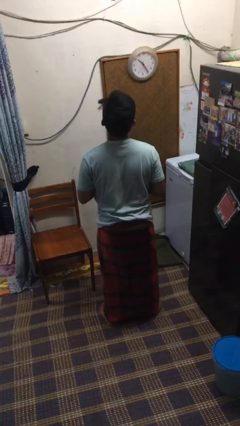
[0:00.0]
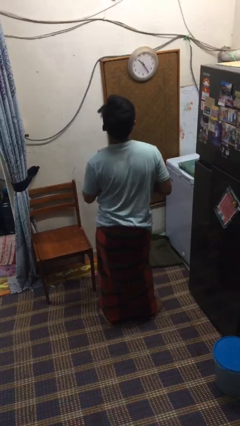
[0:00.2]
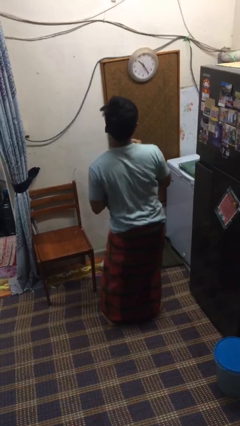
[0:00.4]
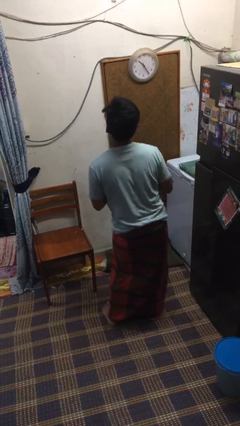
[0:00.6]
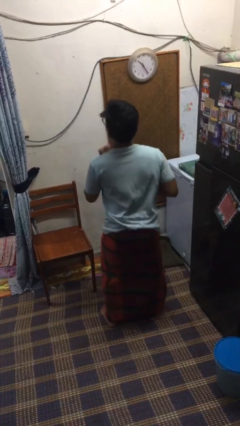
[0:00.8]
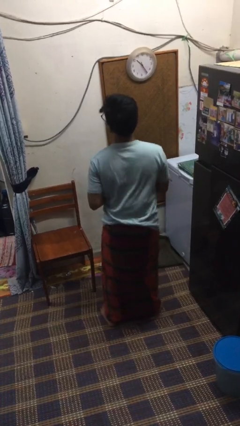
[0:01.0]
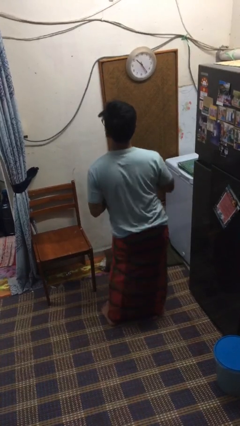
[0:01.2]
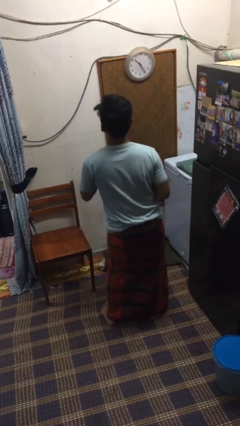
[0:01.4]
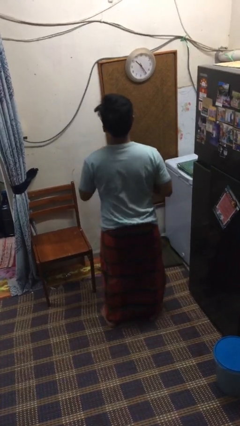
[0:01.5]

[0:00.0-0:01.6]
person wiggles hips

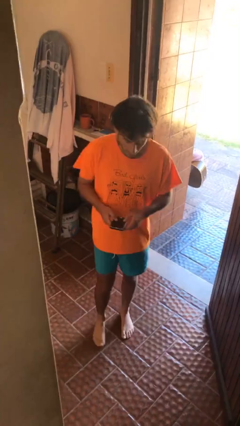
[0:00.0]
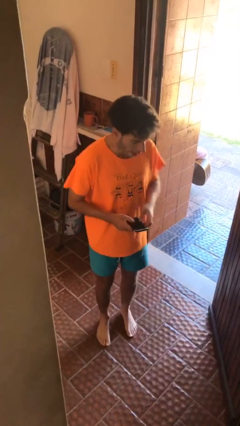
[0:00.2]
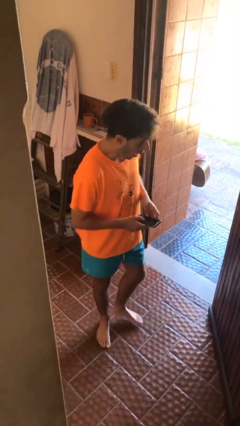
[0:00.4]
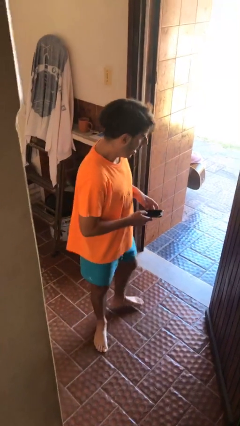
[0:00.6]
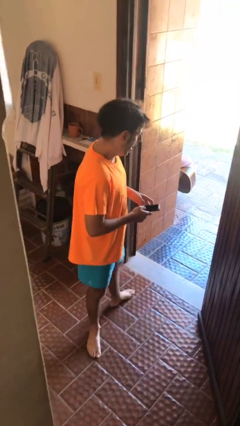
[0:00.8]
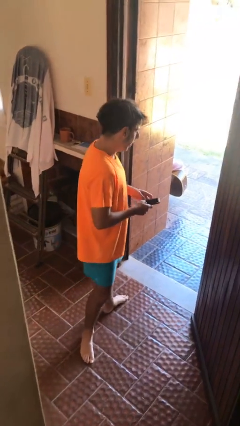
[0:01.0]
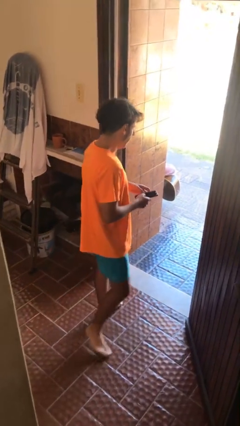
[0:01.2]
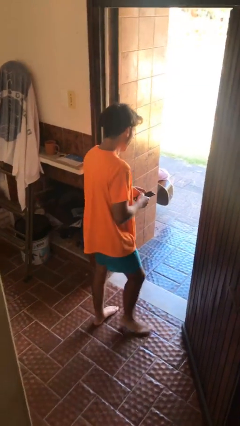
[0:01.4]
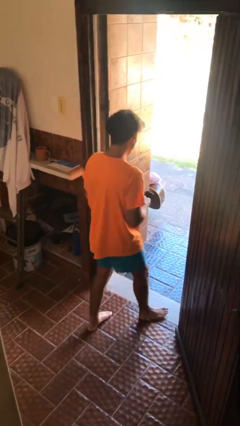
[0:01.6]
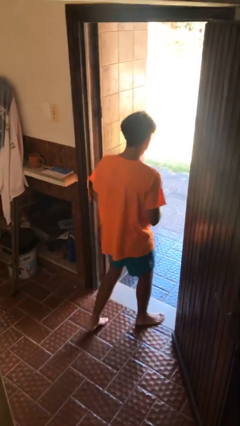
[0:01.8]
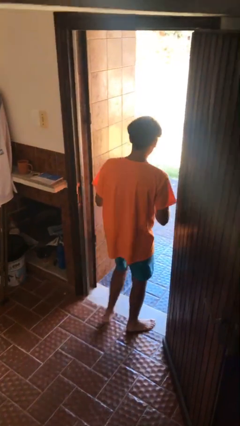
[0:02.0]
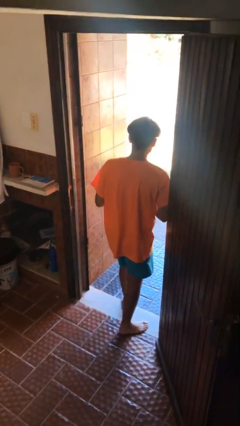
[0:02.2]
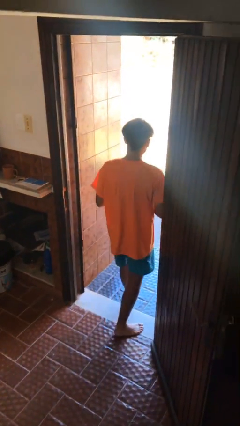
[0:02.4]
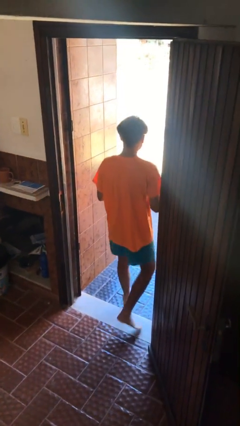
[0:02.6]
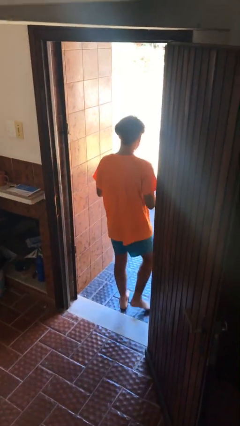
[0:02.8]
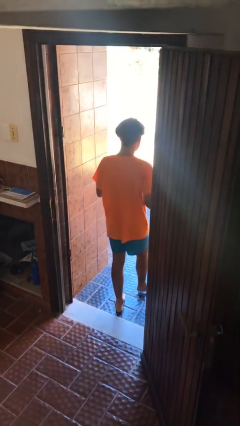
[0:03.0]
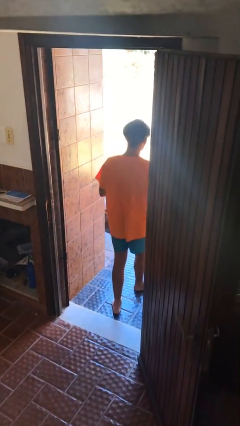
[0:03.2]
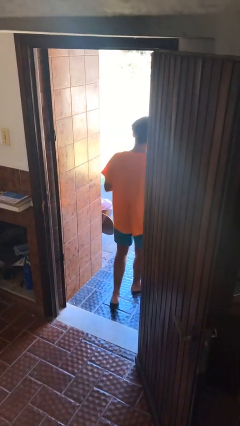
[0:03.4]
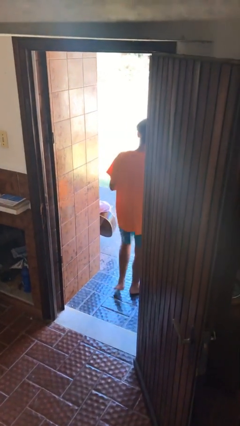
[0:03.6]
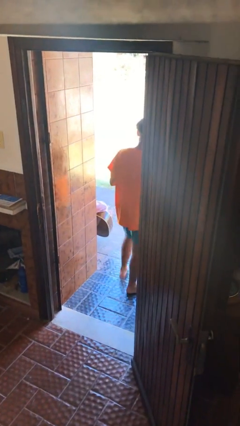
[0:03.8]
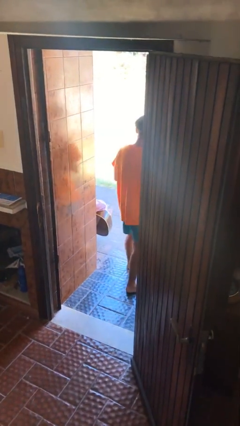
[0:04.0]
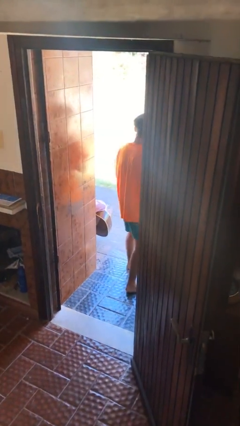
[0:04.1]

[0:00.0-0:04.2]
person exits scene through structure

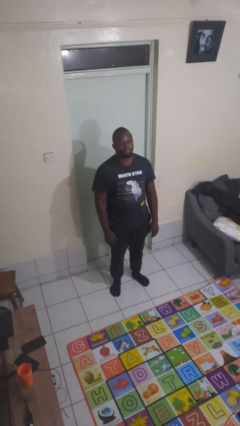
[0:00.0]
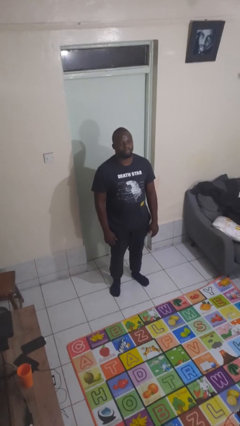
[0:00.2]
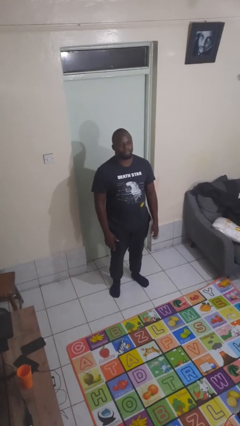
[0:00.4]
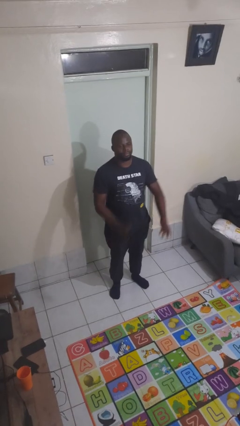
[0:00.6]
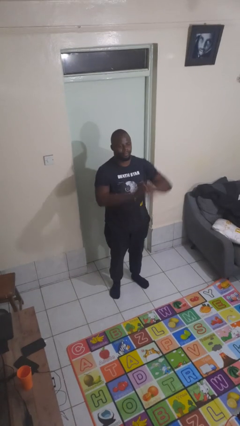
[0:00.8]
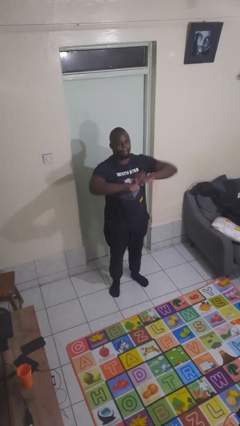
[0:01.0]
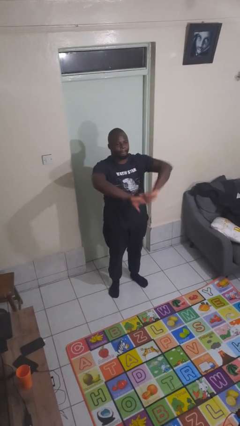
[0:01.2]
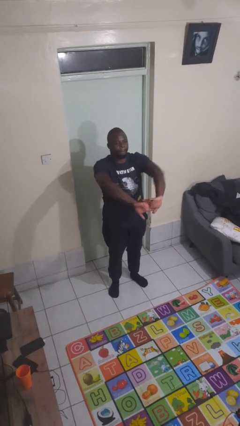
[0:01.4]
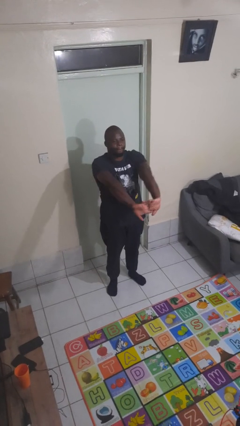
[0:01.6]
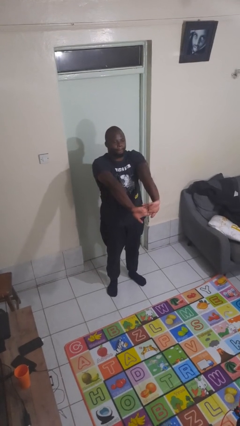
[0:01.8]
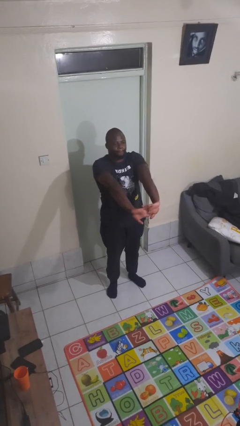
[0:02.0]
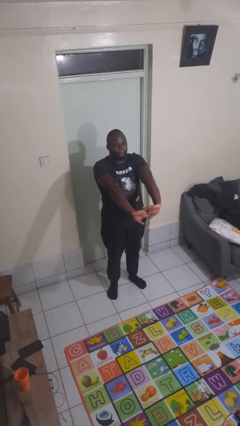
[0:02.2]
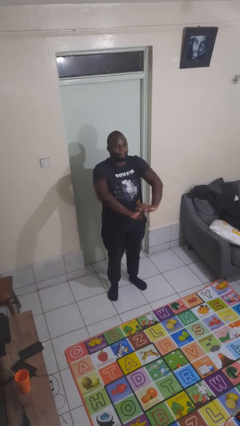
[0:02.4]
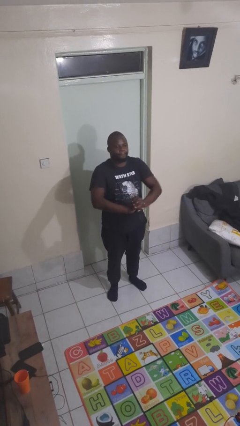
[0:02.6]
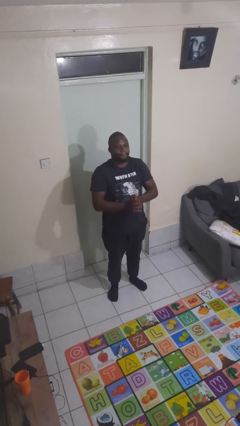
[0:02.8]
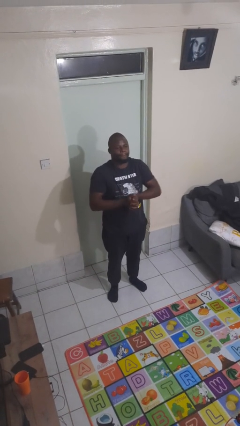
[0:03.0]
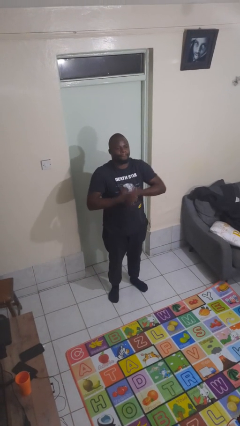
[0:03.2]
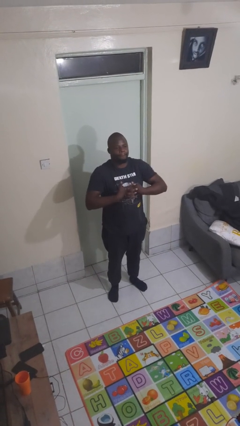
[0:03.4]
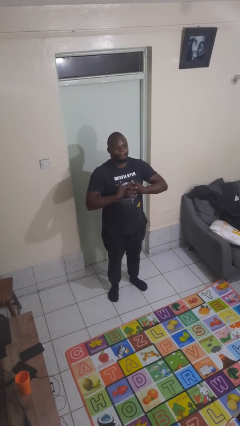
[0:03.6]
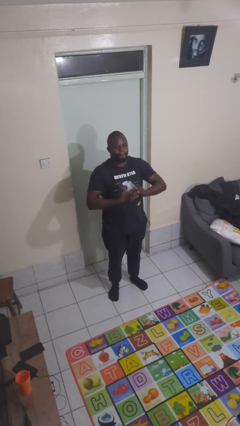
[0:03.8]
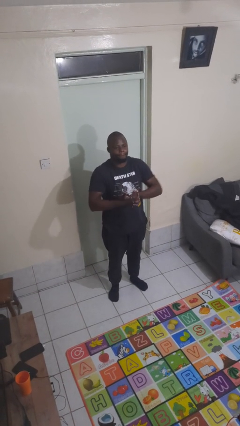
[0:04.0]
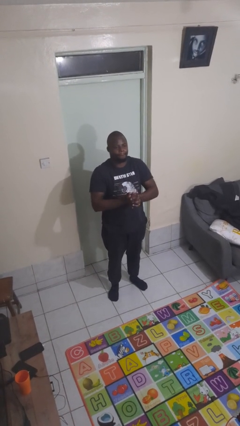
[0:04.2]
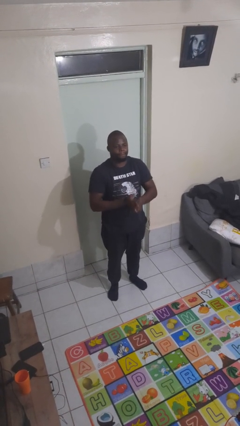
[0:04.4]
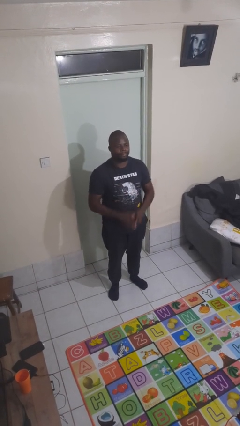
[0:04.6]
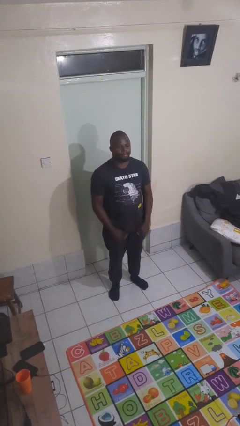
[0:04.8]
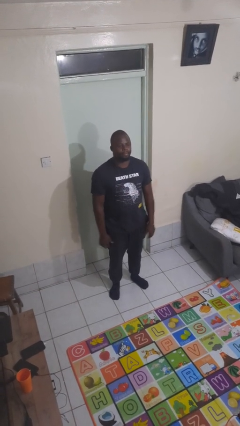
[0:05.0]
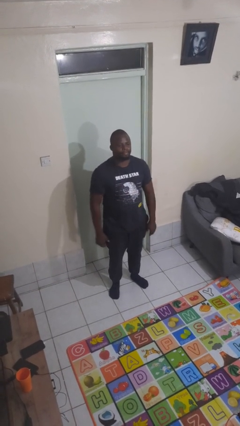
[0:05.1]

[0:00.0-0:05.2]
person cracks knuckles

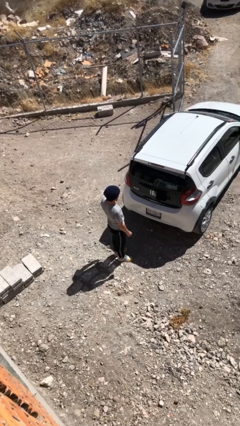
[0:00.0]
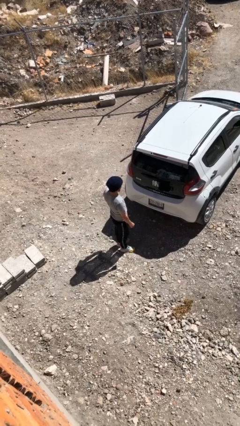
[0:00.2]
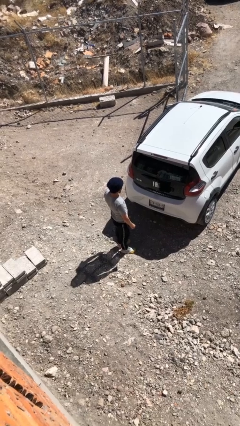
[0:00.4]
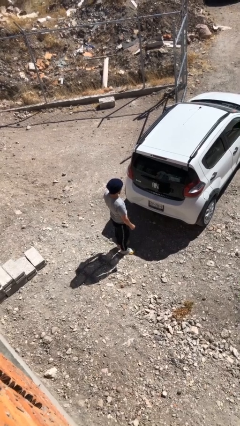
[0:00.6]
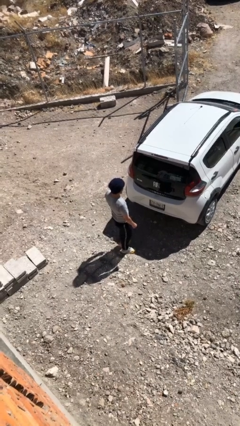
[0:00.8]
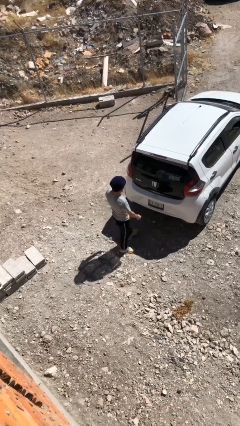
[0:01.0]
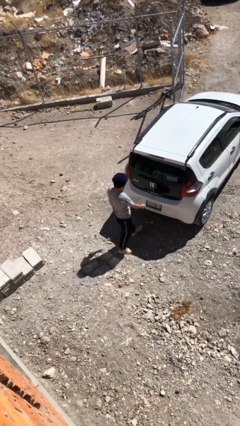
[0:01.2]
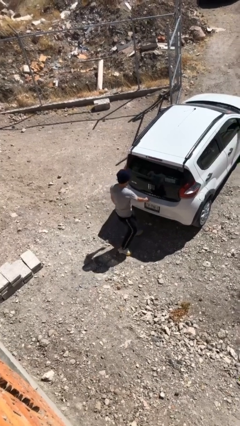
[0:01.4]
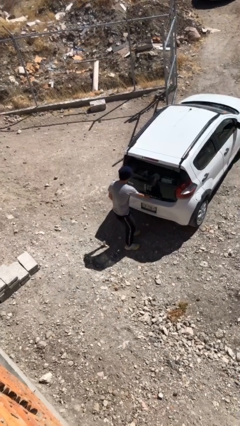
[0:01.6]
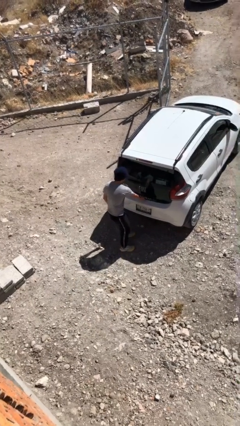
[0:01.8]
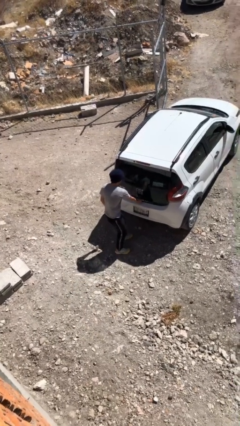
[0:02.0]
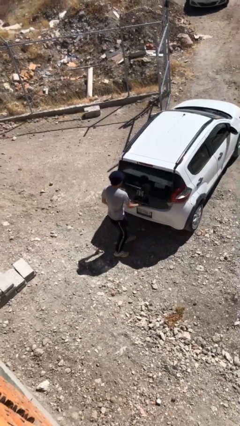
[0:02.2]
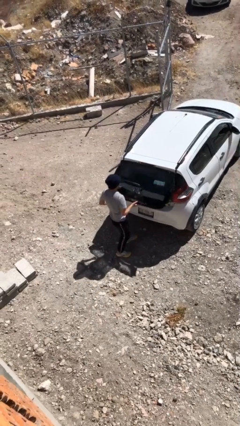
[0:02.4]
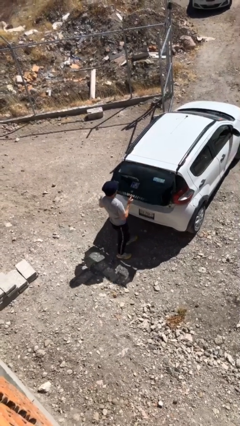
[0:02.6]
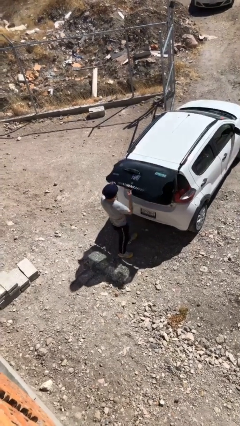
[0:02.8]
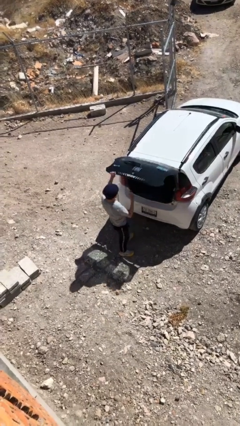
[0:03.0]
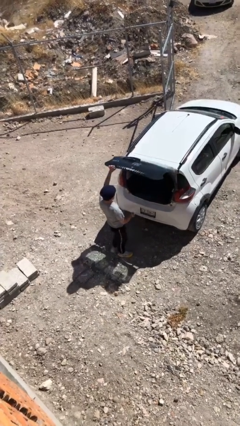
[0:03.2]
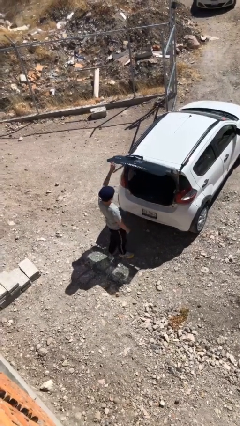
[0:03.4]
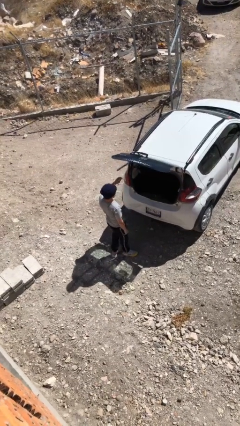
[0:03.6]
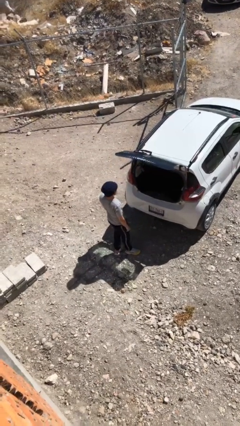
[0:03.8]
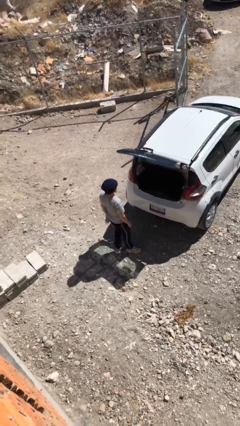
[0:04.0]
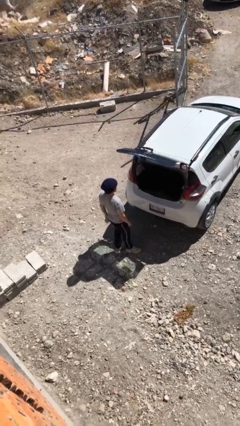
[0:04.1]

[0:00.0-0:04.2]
person opens car trunk

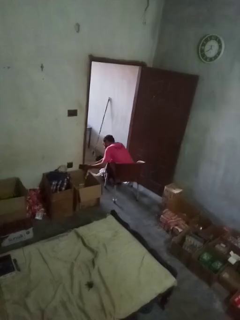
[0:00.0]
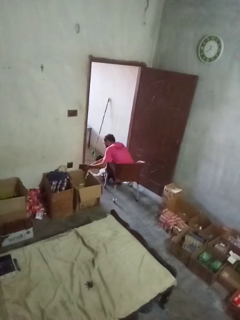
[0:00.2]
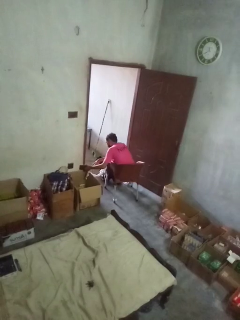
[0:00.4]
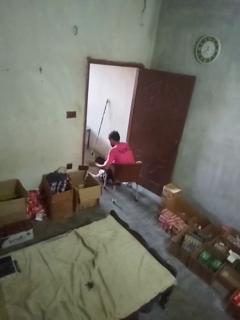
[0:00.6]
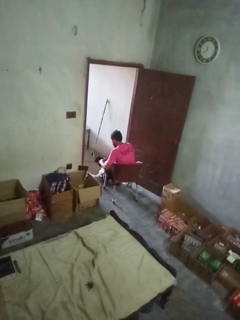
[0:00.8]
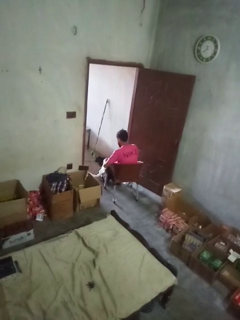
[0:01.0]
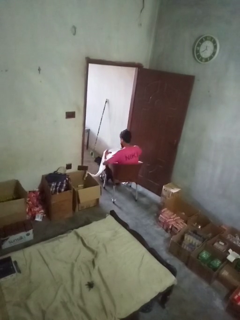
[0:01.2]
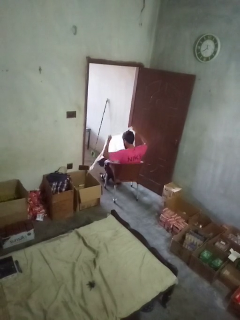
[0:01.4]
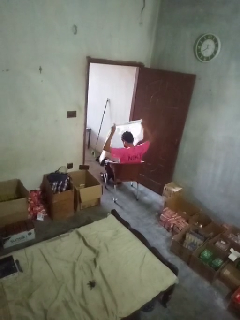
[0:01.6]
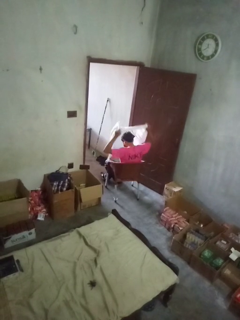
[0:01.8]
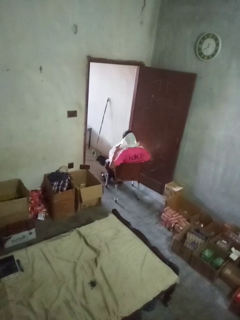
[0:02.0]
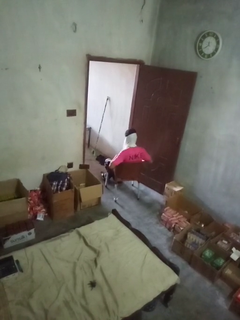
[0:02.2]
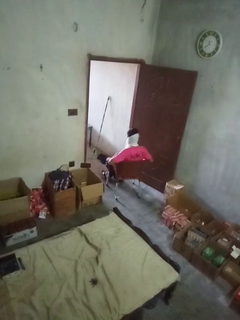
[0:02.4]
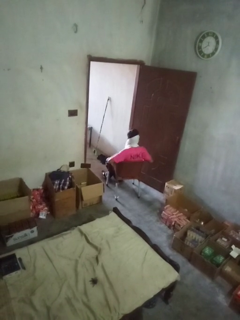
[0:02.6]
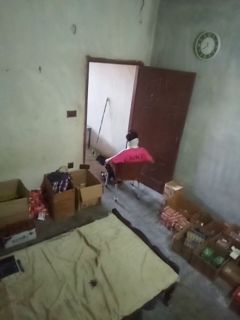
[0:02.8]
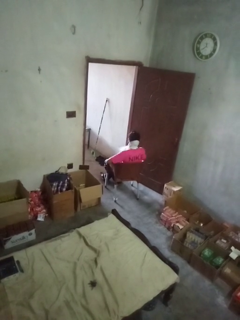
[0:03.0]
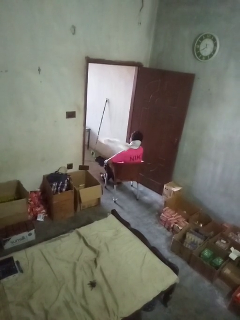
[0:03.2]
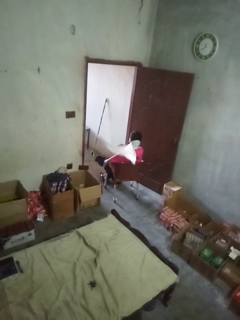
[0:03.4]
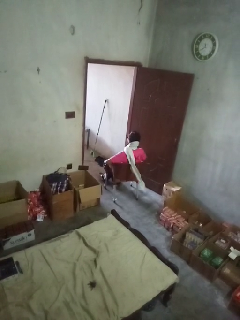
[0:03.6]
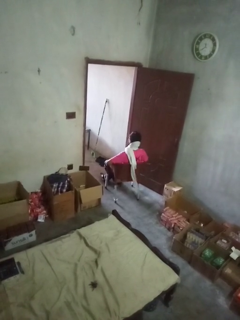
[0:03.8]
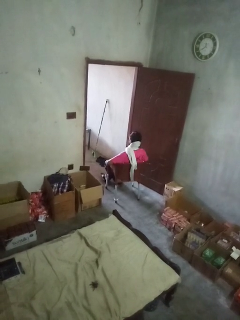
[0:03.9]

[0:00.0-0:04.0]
person puts on scarf
